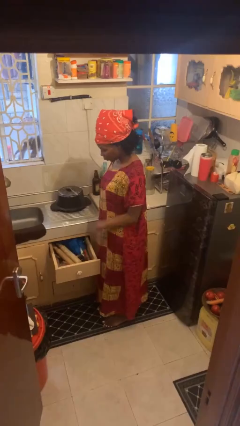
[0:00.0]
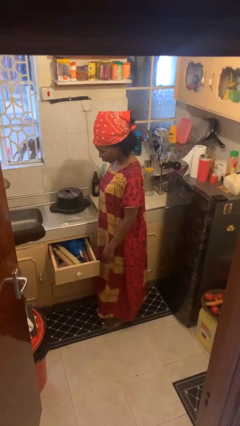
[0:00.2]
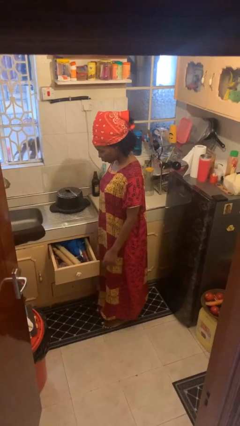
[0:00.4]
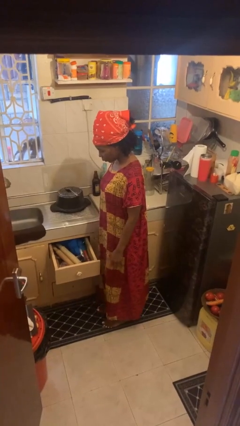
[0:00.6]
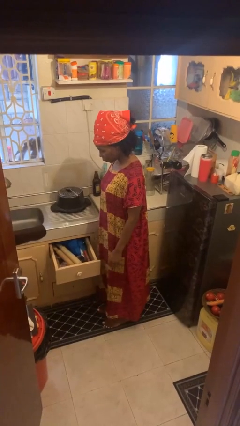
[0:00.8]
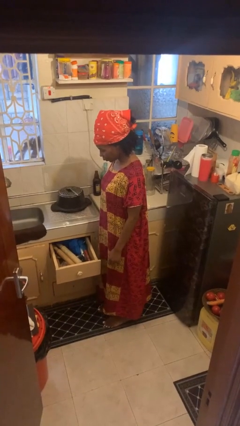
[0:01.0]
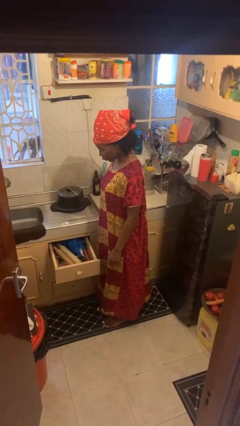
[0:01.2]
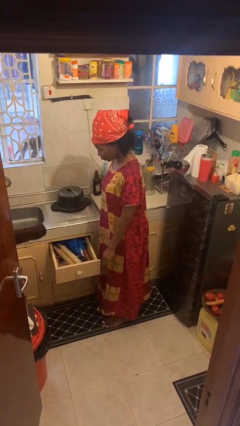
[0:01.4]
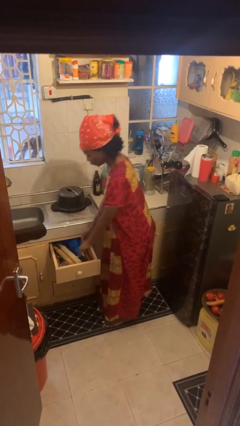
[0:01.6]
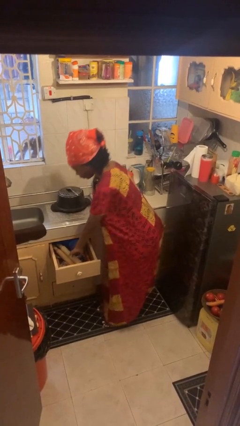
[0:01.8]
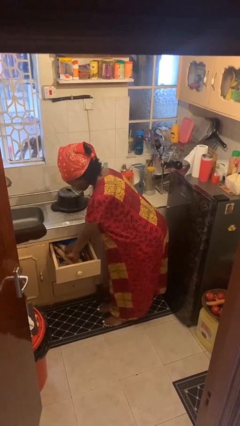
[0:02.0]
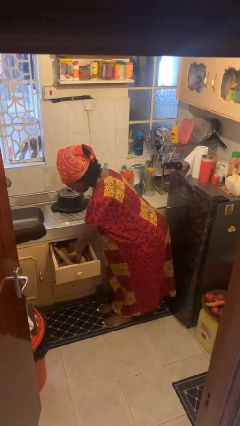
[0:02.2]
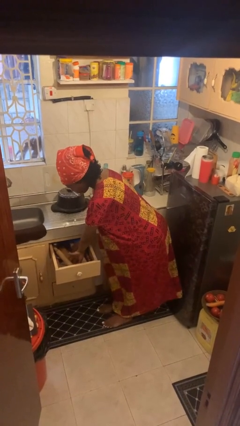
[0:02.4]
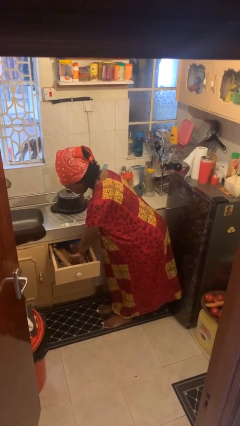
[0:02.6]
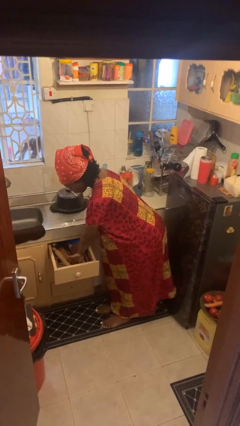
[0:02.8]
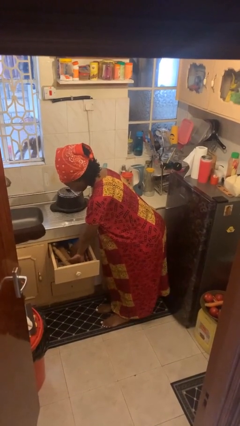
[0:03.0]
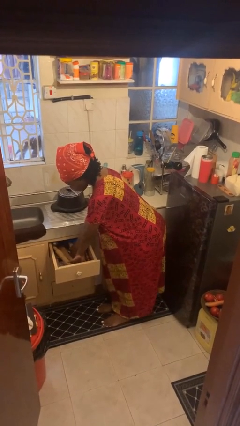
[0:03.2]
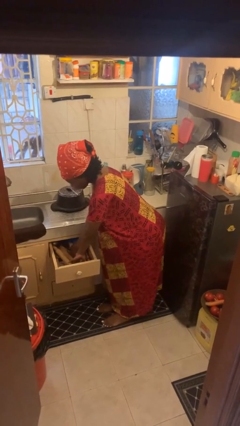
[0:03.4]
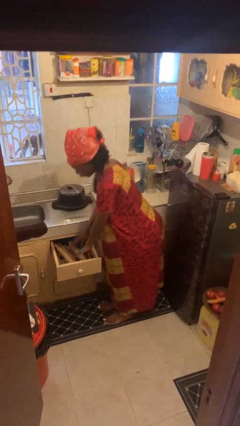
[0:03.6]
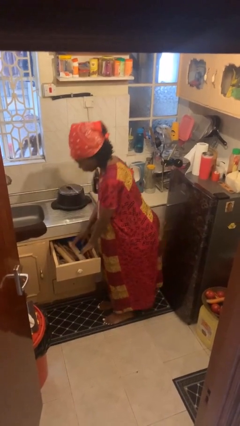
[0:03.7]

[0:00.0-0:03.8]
person searches in kitchen drawer

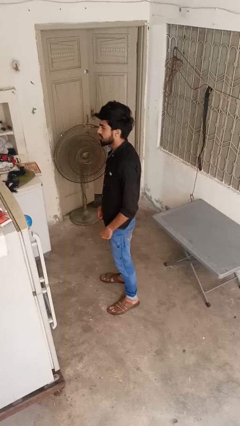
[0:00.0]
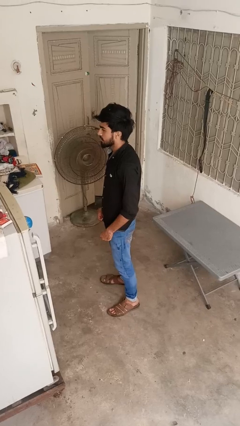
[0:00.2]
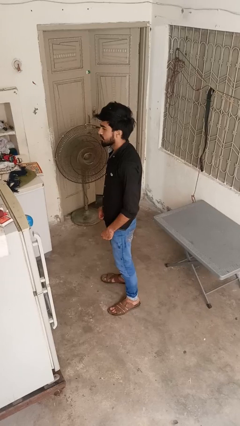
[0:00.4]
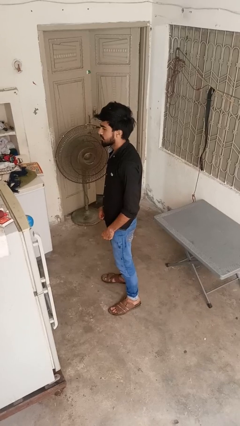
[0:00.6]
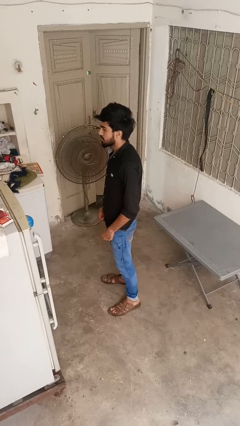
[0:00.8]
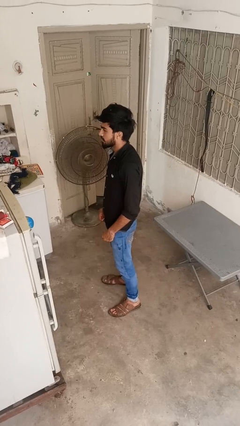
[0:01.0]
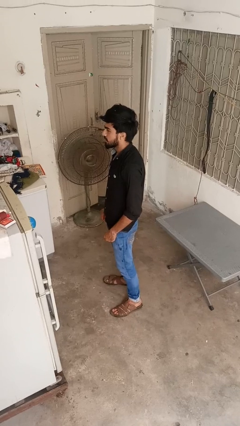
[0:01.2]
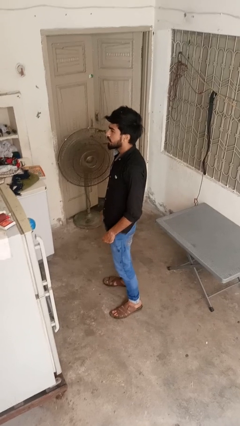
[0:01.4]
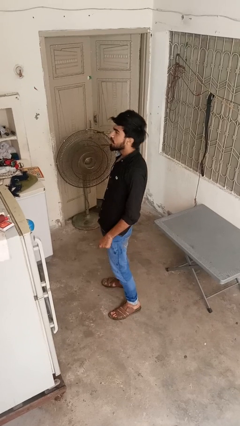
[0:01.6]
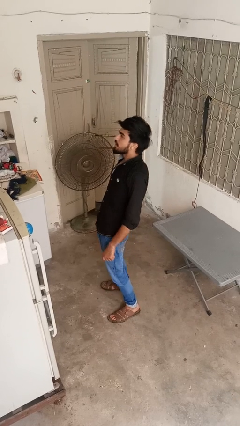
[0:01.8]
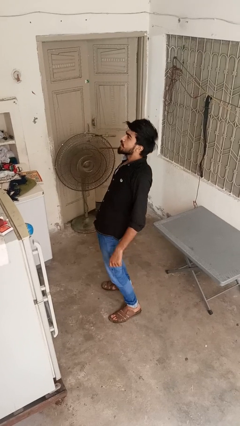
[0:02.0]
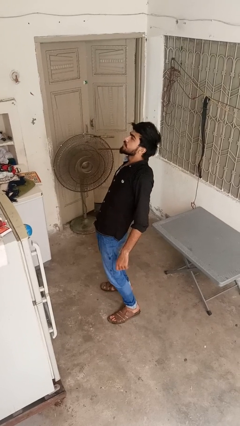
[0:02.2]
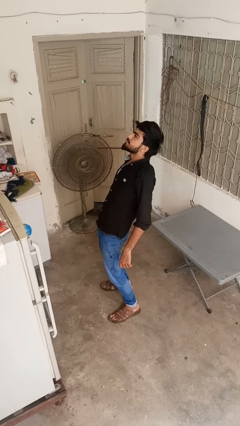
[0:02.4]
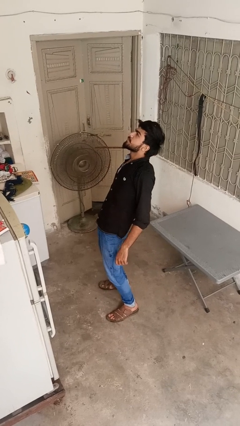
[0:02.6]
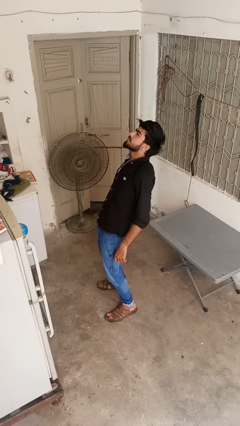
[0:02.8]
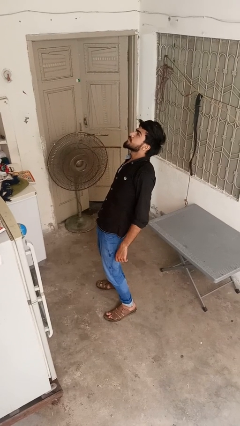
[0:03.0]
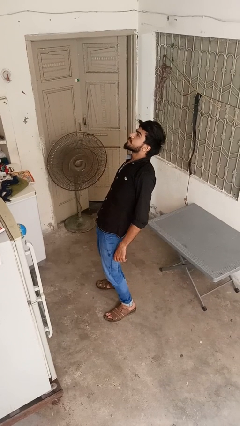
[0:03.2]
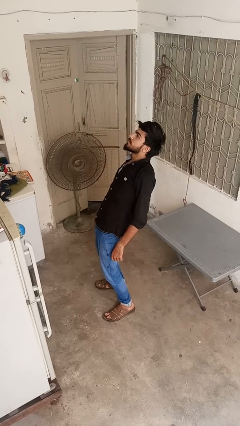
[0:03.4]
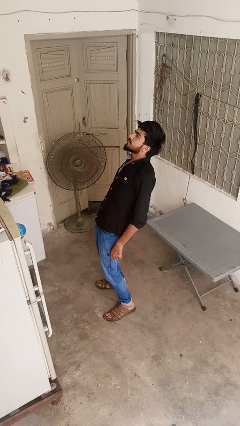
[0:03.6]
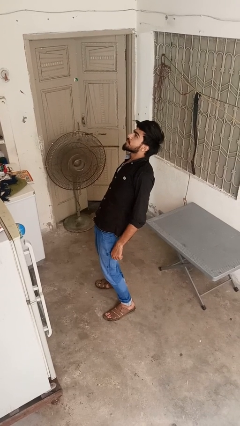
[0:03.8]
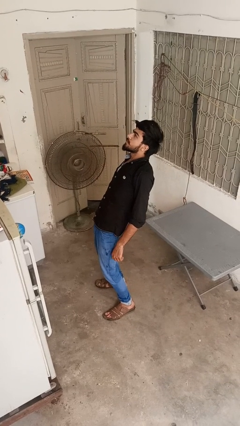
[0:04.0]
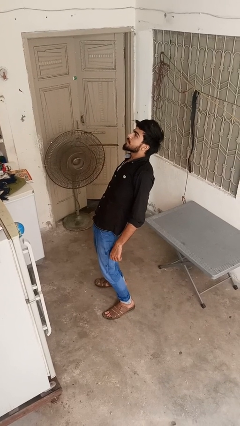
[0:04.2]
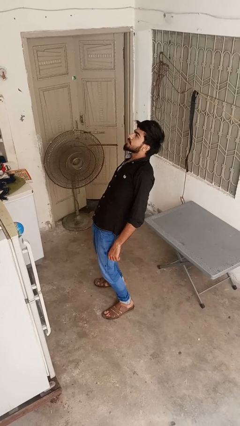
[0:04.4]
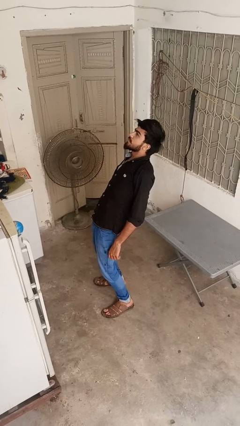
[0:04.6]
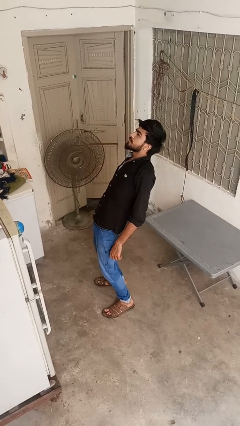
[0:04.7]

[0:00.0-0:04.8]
person stretches back

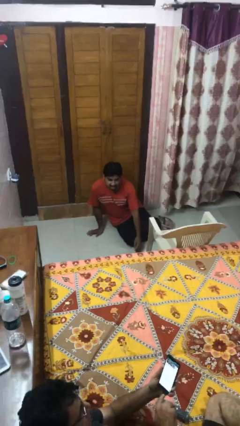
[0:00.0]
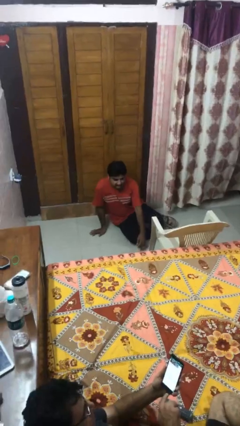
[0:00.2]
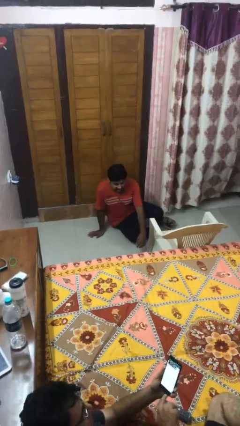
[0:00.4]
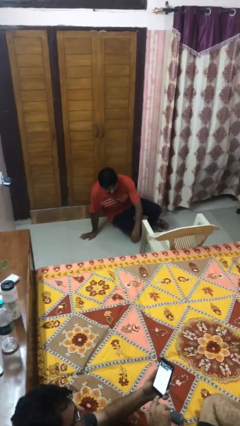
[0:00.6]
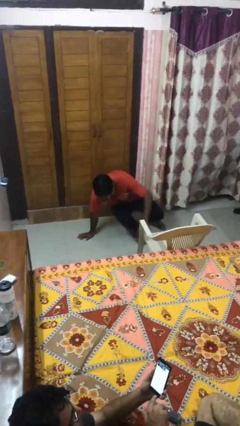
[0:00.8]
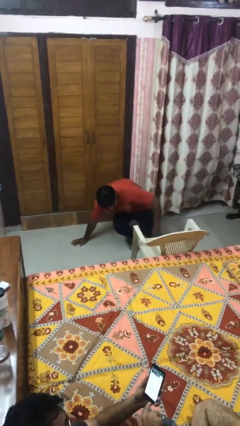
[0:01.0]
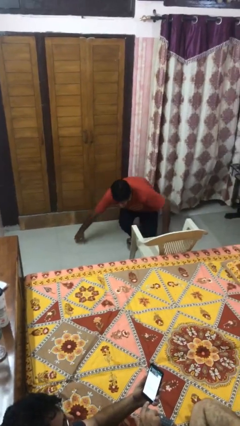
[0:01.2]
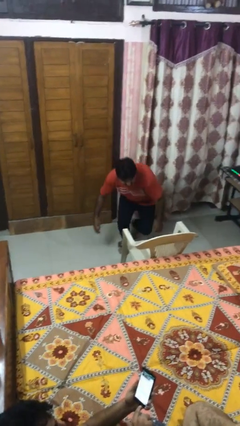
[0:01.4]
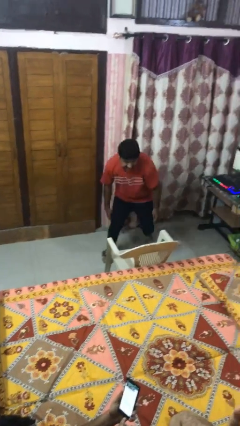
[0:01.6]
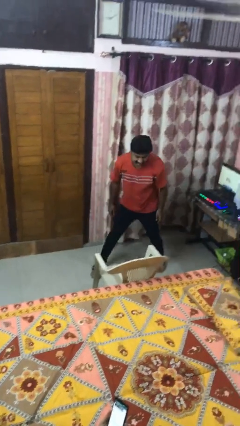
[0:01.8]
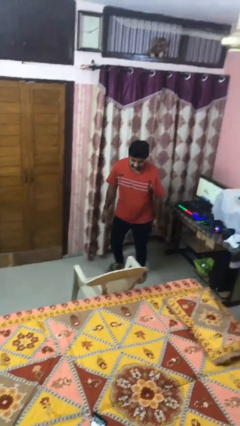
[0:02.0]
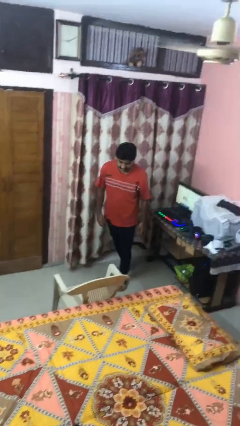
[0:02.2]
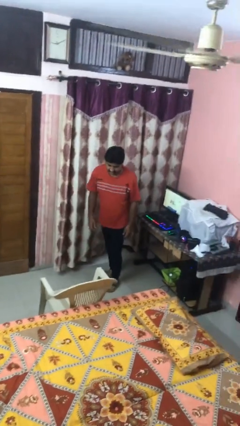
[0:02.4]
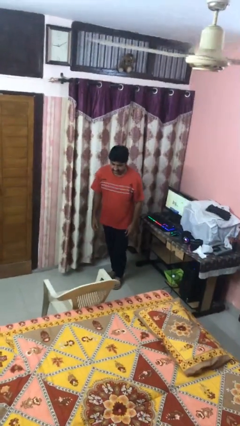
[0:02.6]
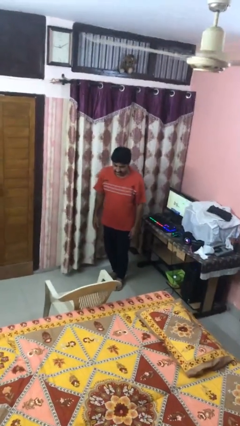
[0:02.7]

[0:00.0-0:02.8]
person stands up from floor

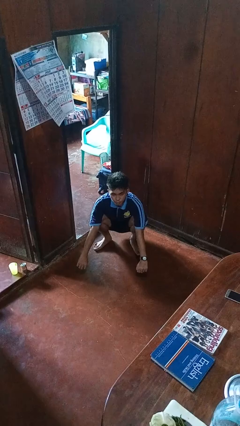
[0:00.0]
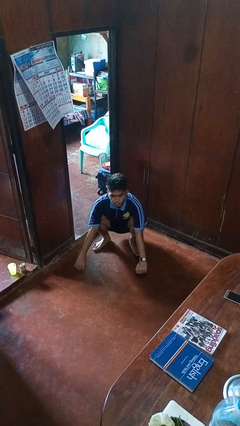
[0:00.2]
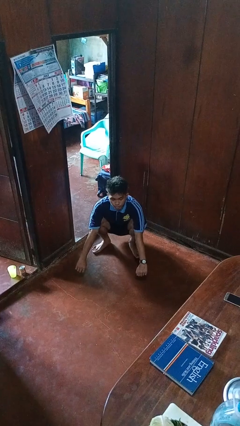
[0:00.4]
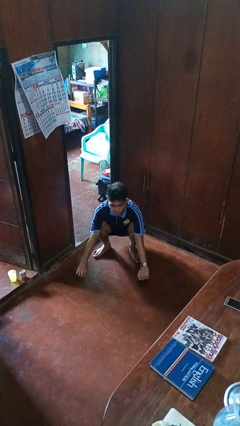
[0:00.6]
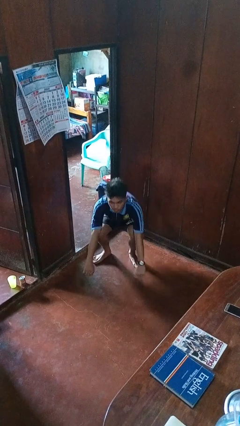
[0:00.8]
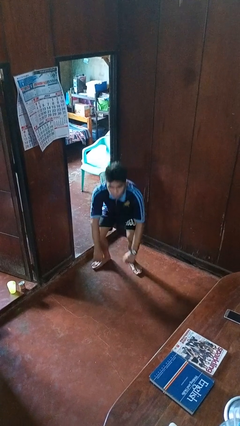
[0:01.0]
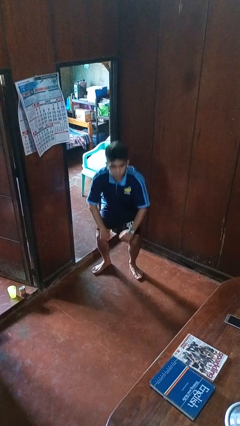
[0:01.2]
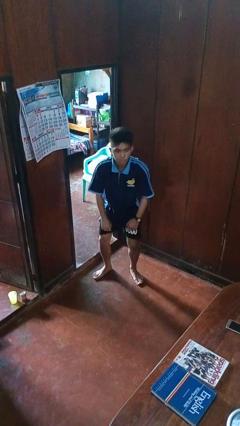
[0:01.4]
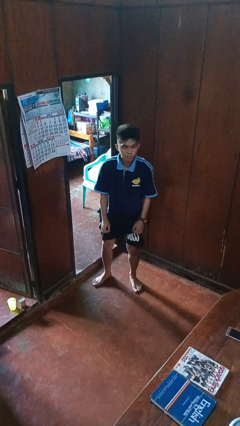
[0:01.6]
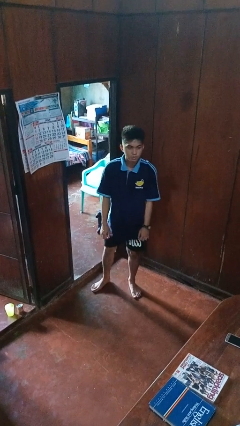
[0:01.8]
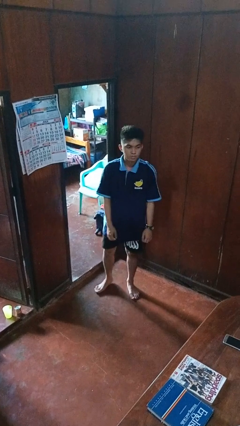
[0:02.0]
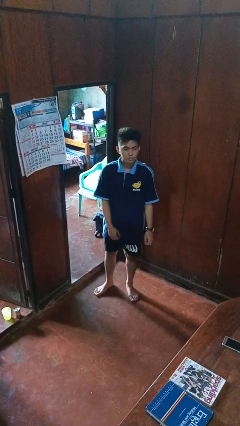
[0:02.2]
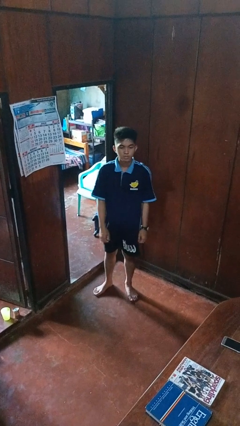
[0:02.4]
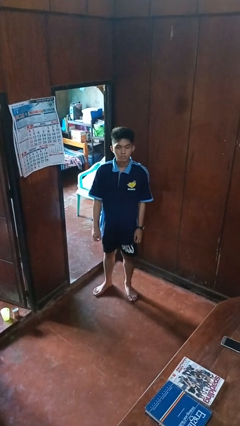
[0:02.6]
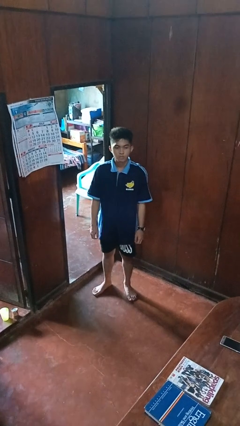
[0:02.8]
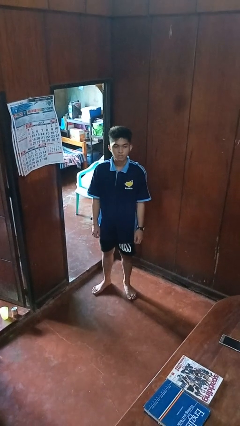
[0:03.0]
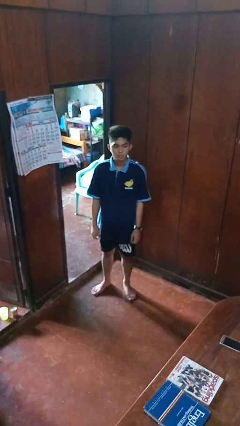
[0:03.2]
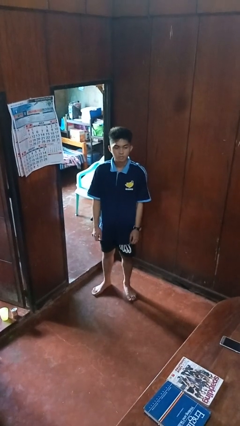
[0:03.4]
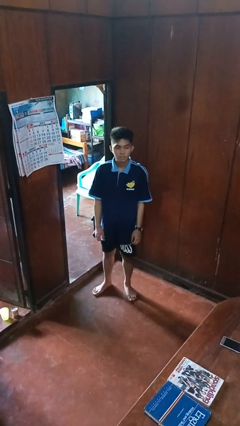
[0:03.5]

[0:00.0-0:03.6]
person stands up

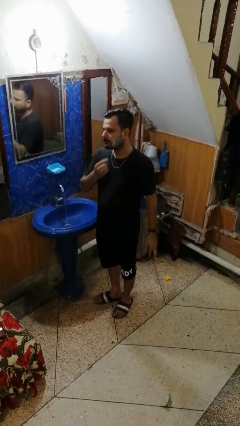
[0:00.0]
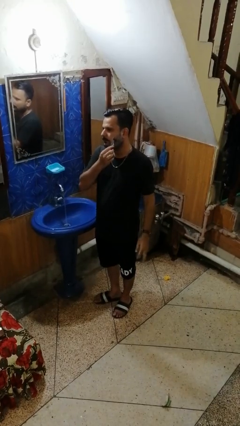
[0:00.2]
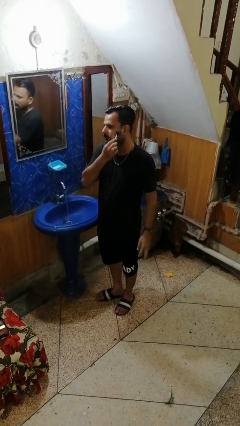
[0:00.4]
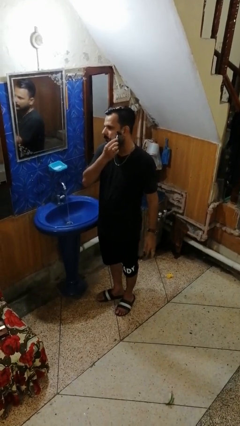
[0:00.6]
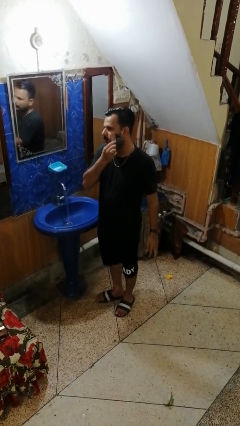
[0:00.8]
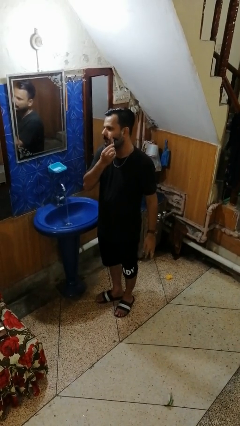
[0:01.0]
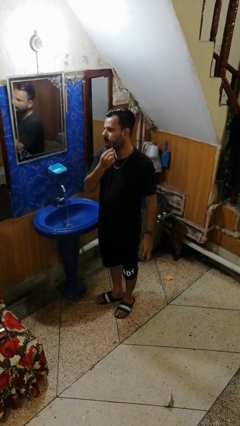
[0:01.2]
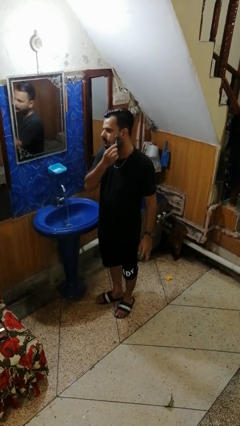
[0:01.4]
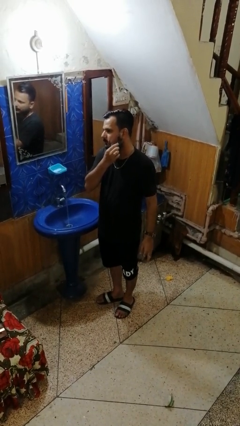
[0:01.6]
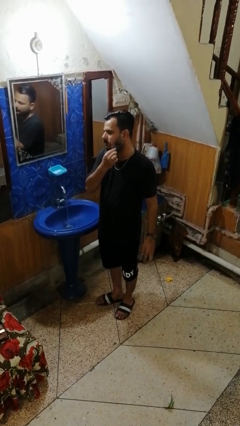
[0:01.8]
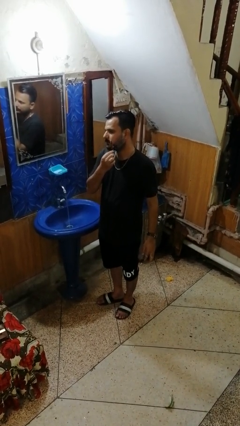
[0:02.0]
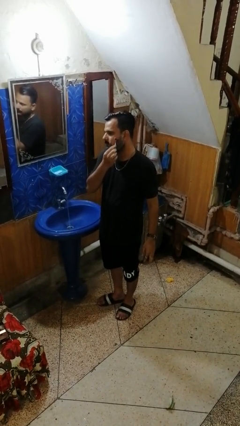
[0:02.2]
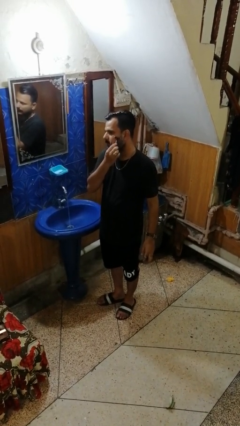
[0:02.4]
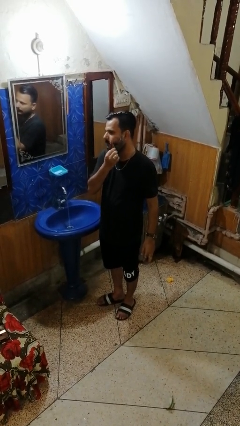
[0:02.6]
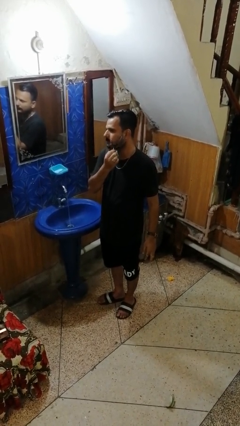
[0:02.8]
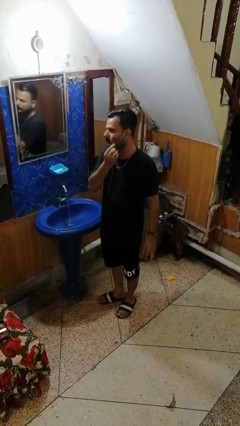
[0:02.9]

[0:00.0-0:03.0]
person shaves face
